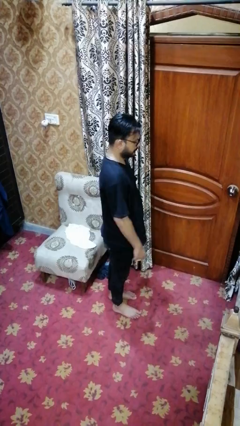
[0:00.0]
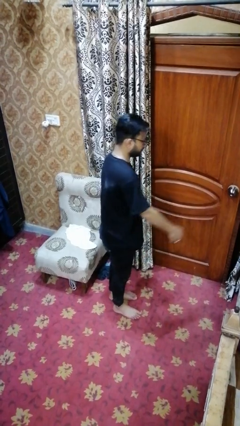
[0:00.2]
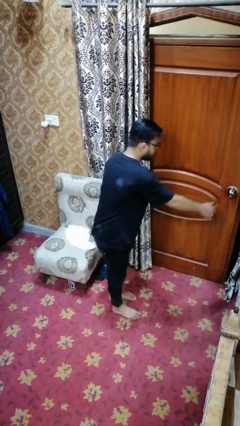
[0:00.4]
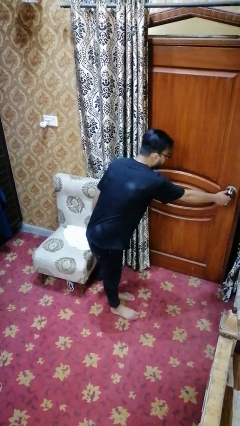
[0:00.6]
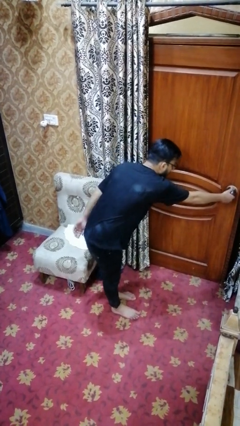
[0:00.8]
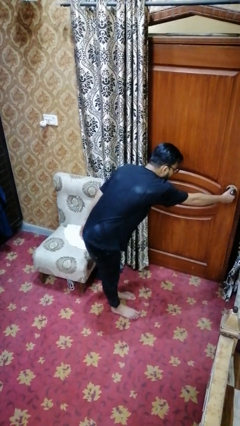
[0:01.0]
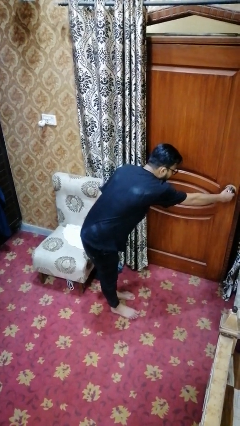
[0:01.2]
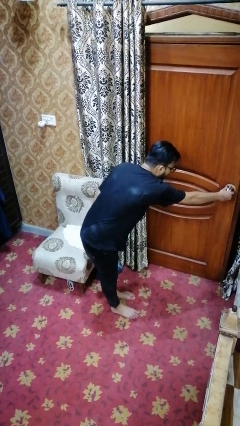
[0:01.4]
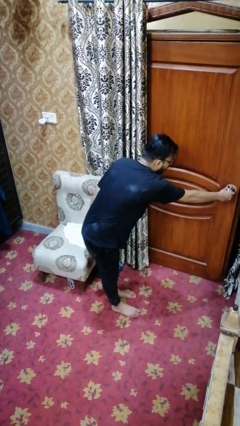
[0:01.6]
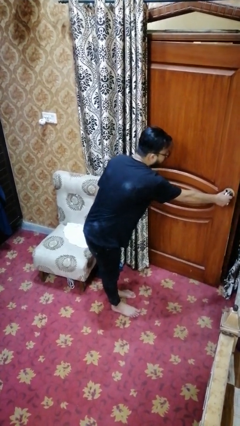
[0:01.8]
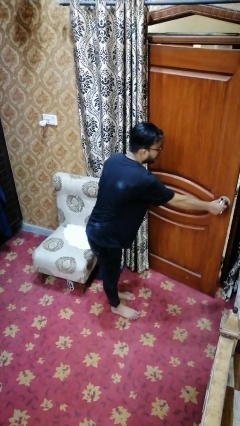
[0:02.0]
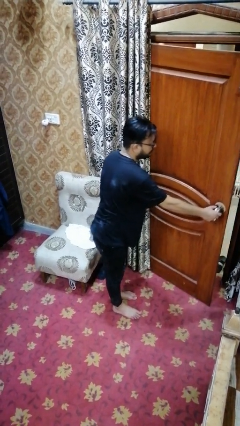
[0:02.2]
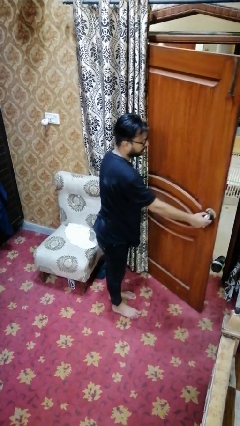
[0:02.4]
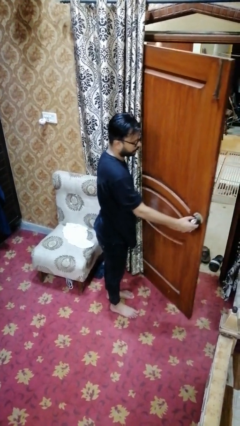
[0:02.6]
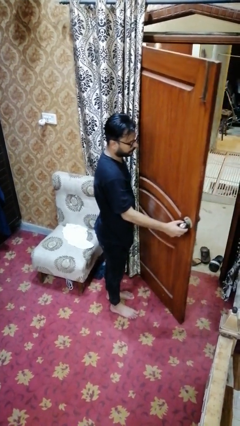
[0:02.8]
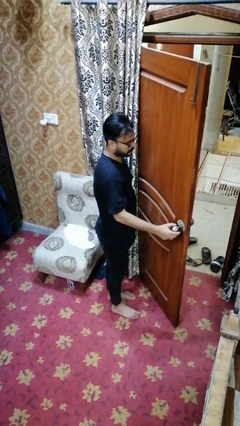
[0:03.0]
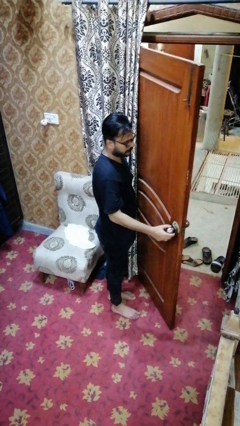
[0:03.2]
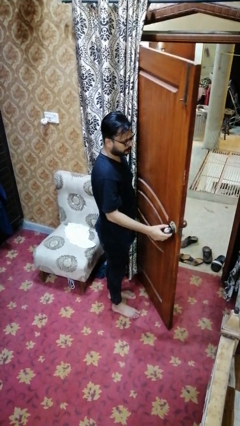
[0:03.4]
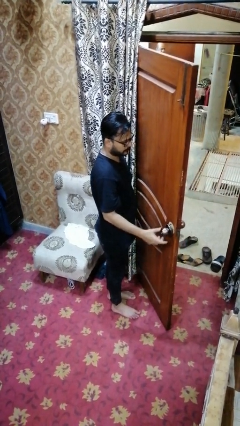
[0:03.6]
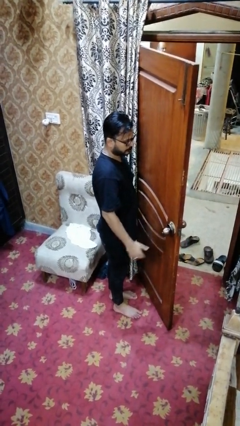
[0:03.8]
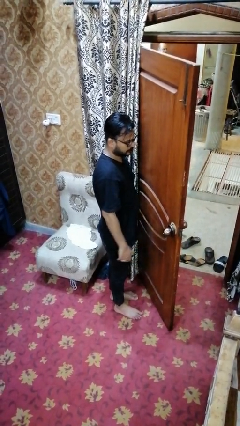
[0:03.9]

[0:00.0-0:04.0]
person opens facility door

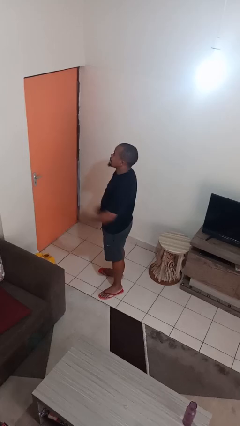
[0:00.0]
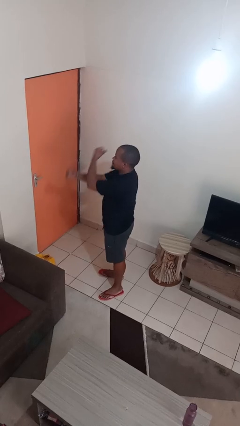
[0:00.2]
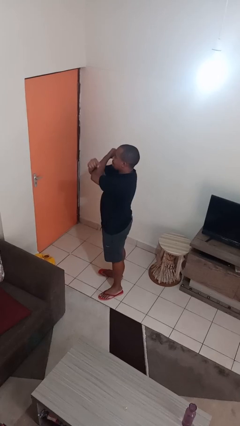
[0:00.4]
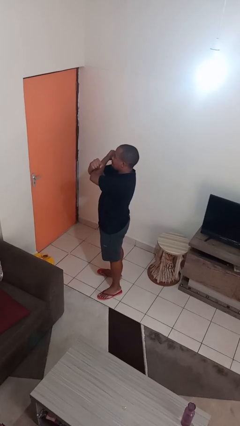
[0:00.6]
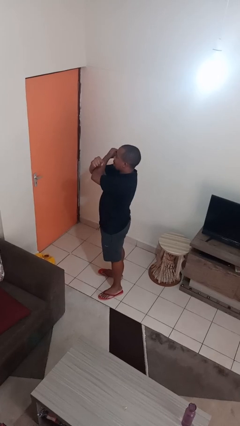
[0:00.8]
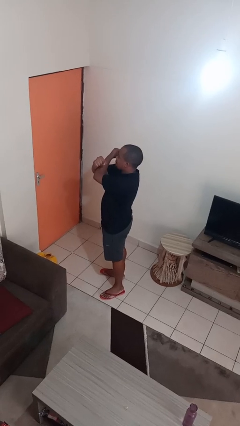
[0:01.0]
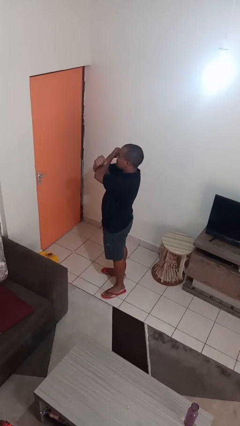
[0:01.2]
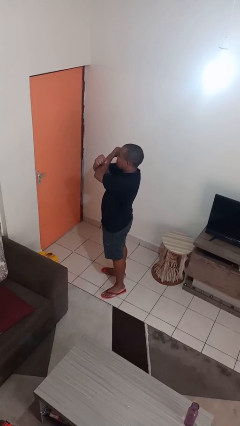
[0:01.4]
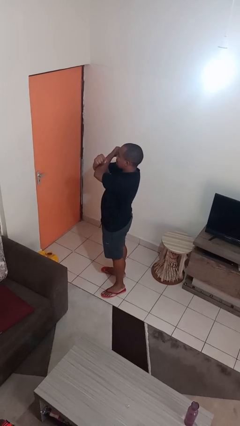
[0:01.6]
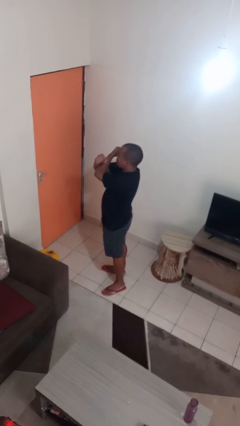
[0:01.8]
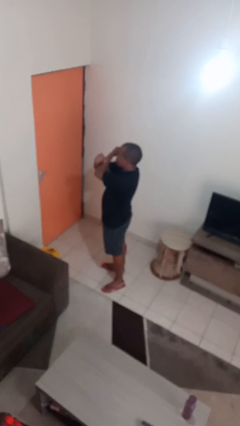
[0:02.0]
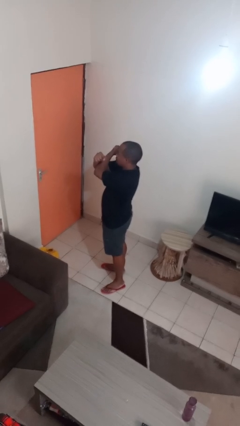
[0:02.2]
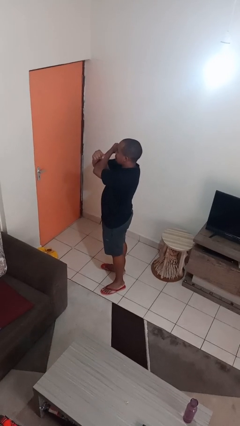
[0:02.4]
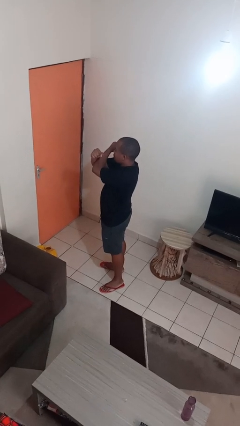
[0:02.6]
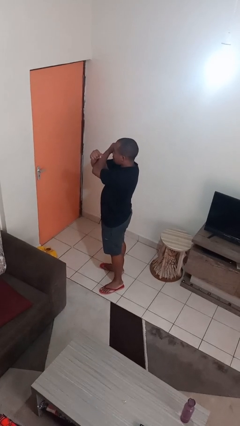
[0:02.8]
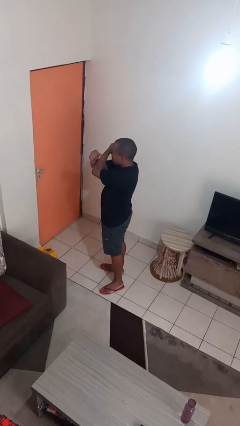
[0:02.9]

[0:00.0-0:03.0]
person gestures arms x

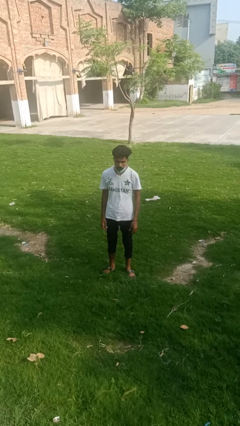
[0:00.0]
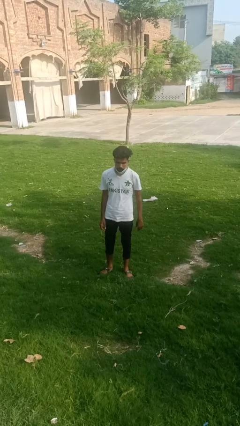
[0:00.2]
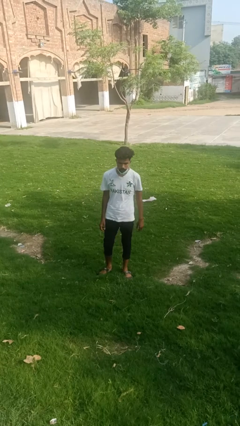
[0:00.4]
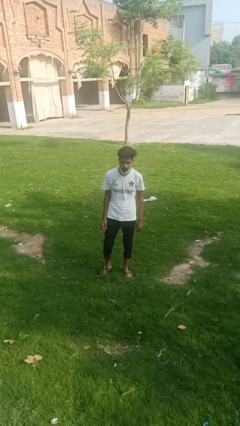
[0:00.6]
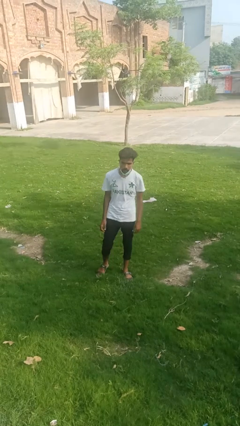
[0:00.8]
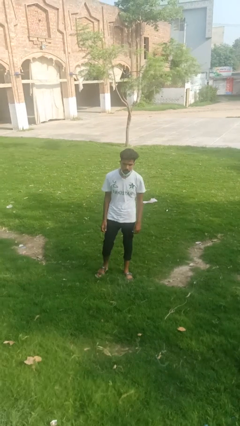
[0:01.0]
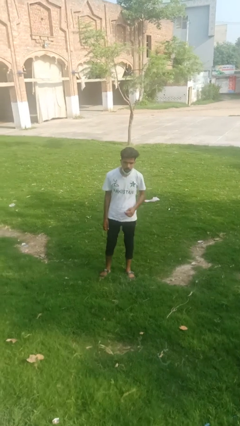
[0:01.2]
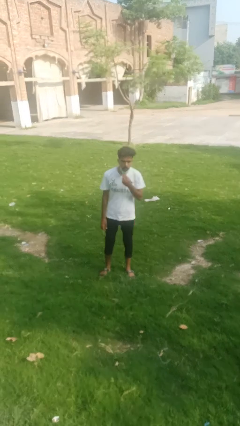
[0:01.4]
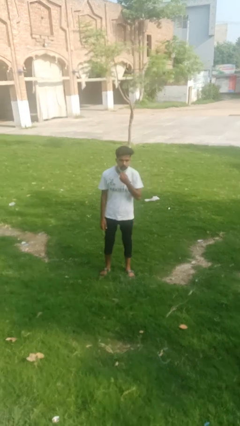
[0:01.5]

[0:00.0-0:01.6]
person takes off facemask

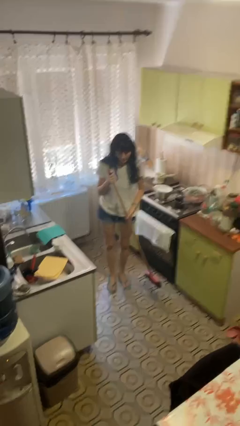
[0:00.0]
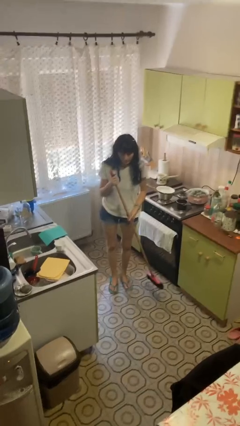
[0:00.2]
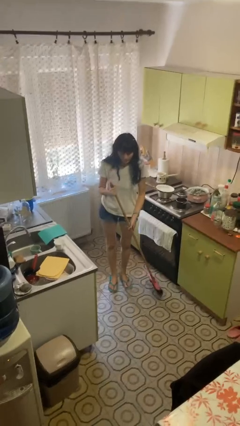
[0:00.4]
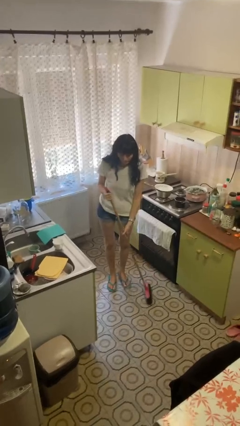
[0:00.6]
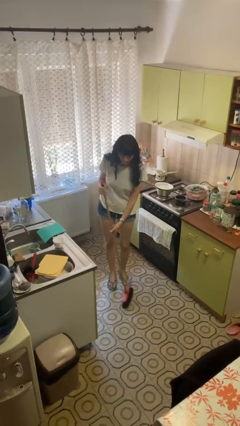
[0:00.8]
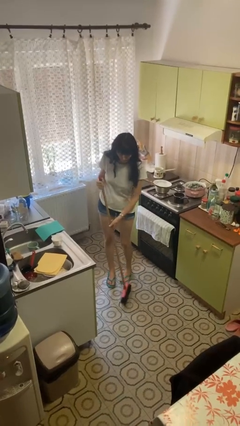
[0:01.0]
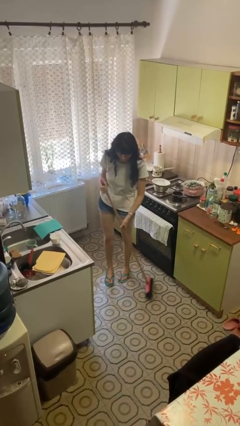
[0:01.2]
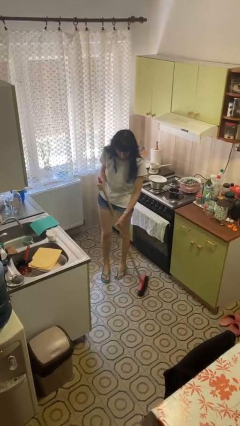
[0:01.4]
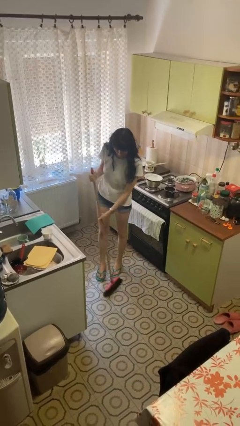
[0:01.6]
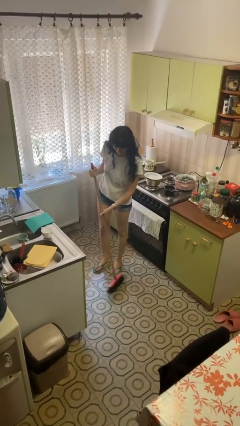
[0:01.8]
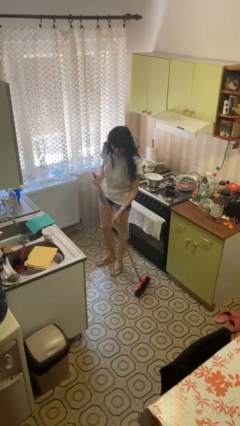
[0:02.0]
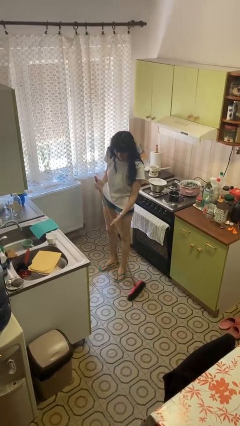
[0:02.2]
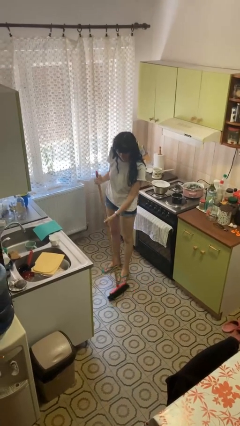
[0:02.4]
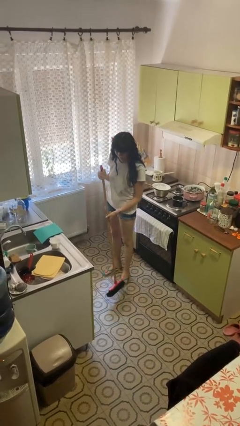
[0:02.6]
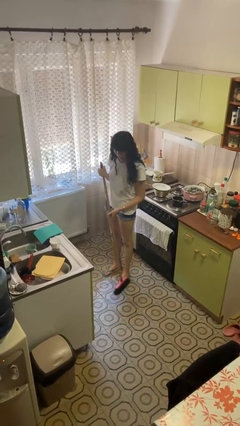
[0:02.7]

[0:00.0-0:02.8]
person sweeps floor

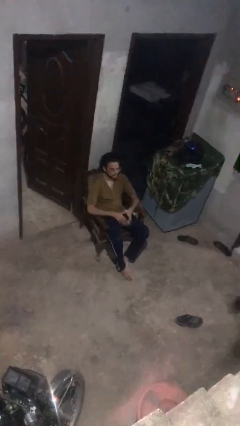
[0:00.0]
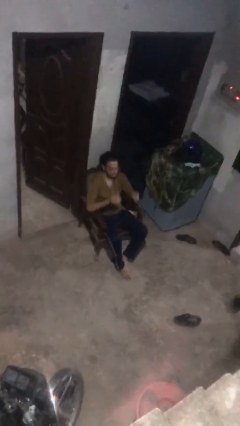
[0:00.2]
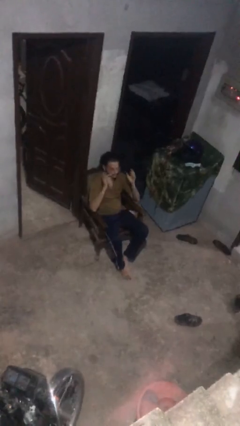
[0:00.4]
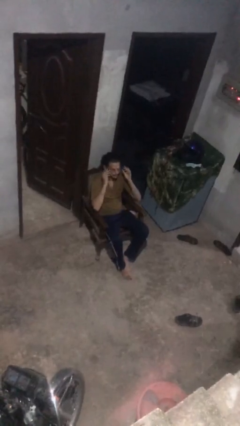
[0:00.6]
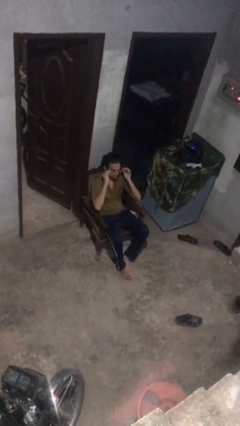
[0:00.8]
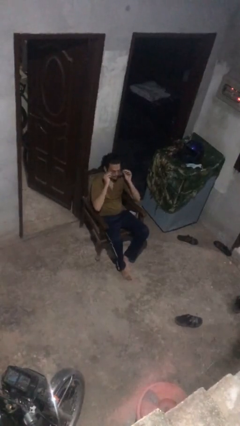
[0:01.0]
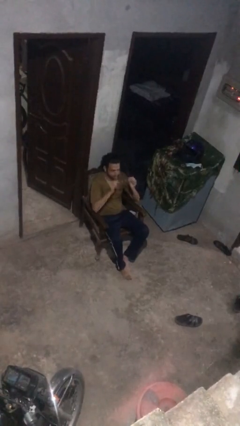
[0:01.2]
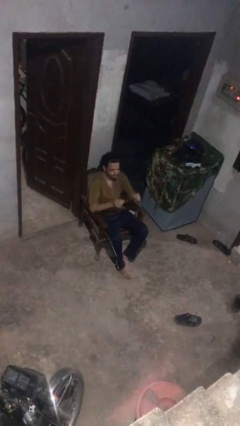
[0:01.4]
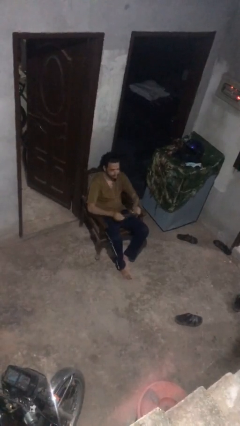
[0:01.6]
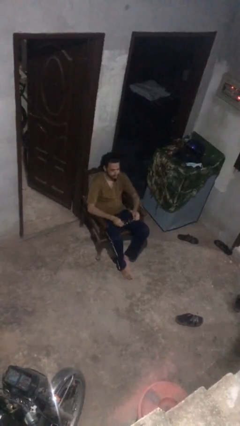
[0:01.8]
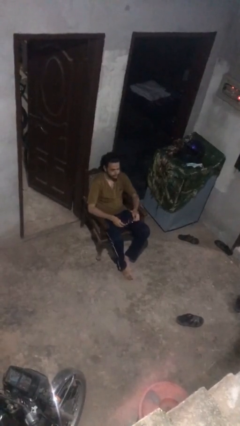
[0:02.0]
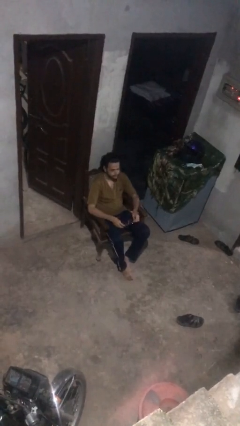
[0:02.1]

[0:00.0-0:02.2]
person takes off glasses

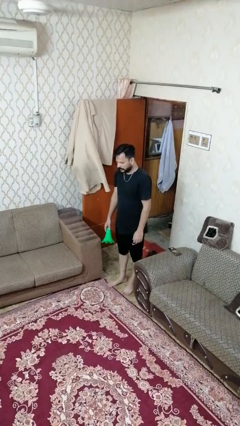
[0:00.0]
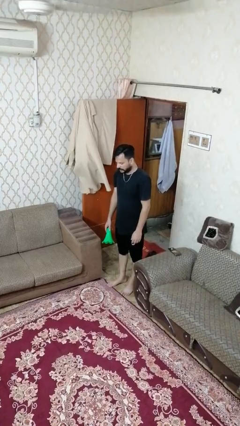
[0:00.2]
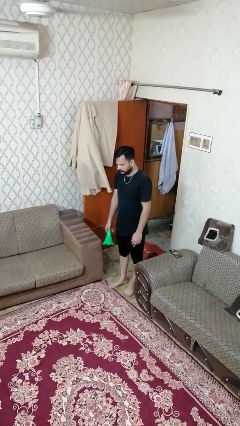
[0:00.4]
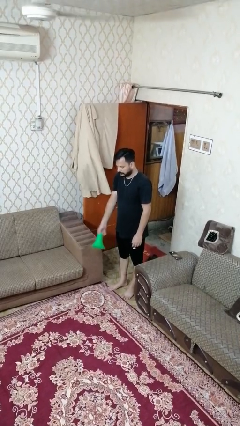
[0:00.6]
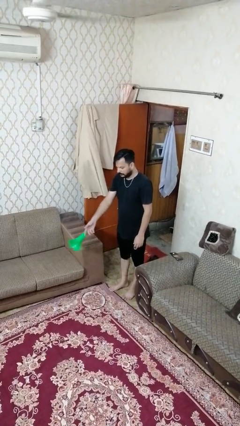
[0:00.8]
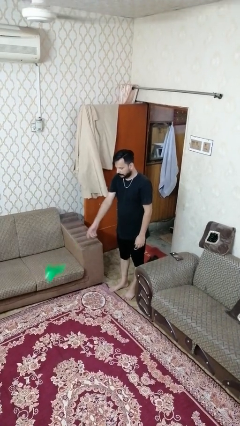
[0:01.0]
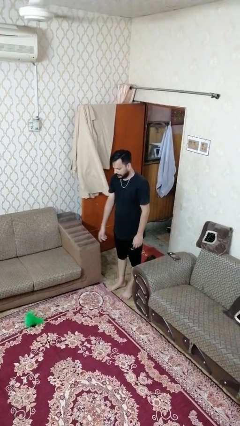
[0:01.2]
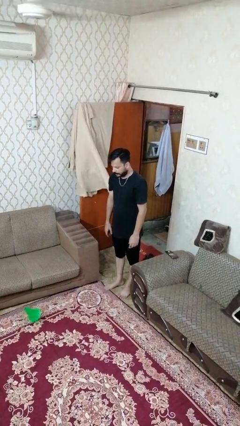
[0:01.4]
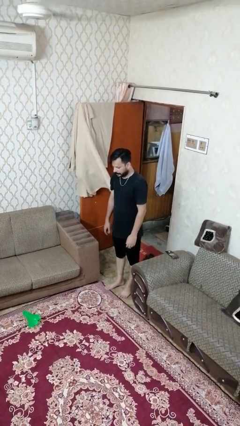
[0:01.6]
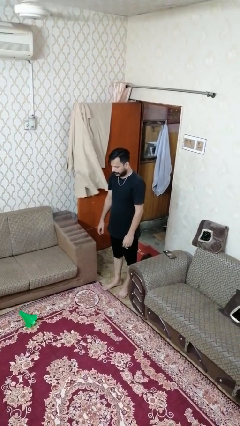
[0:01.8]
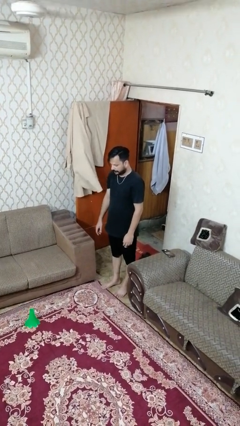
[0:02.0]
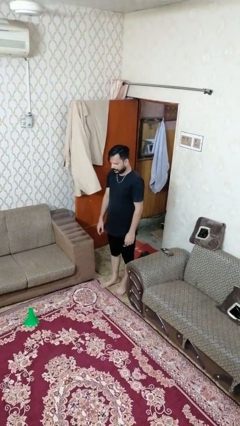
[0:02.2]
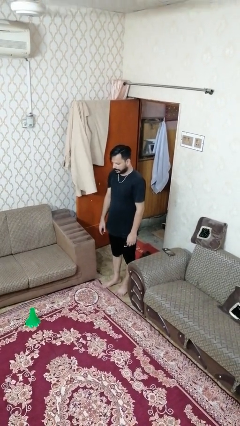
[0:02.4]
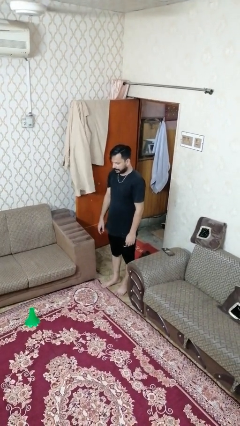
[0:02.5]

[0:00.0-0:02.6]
person throws object to ground

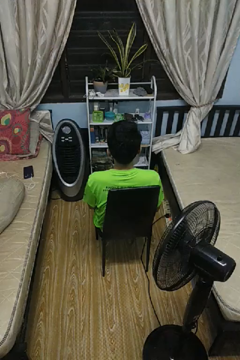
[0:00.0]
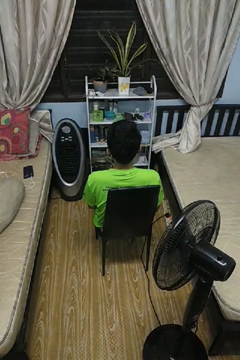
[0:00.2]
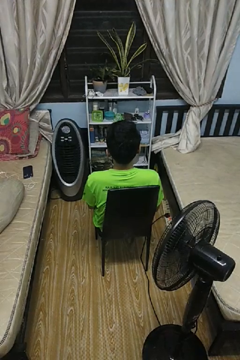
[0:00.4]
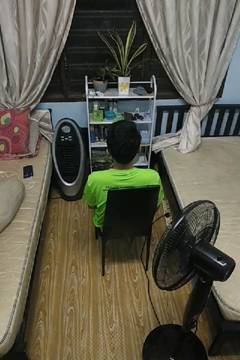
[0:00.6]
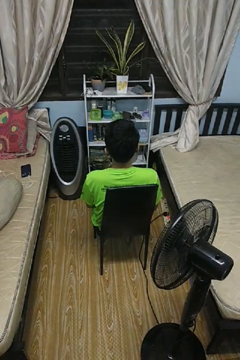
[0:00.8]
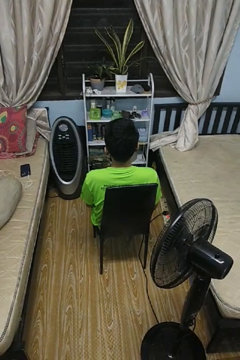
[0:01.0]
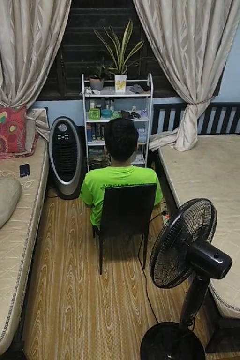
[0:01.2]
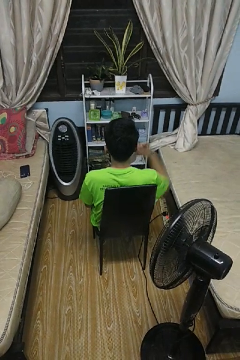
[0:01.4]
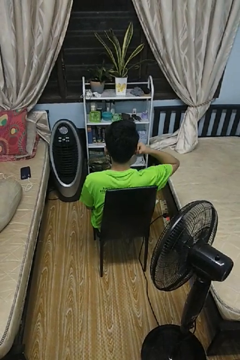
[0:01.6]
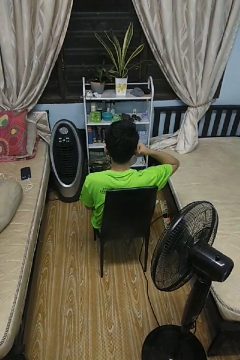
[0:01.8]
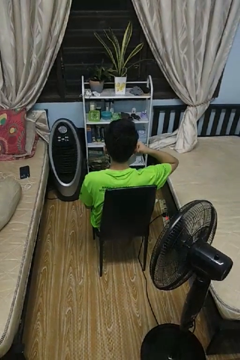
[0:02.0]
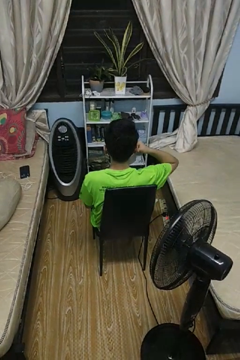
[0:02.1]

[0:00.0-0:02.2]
person gestures call me
